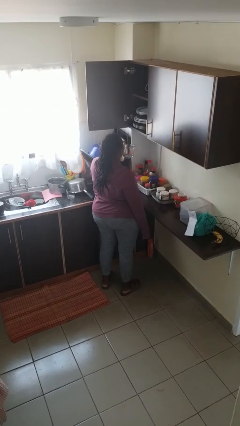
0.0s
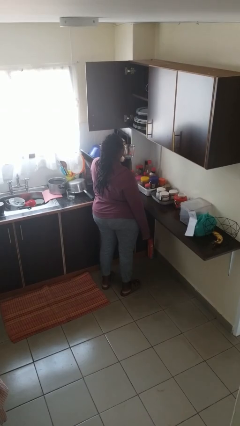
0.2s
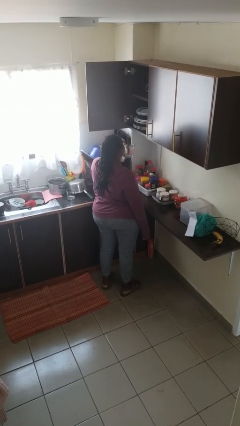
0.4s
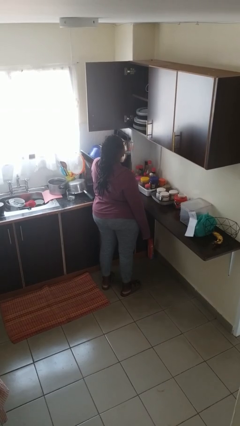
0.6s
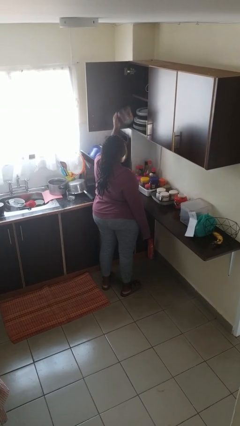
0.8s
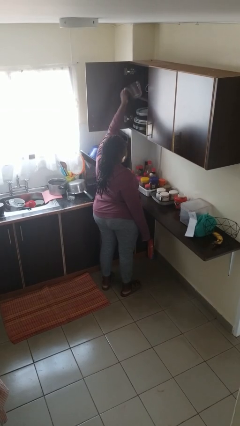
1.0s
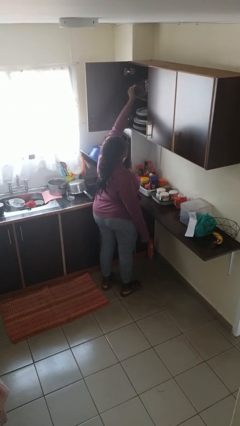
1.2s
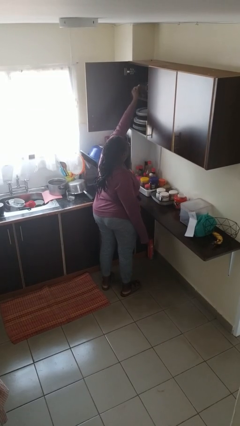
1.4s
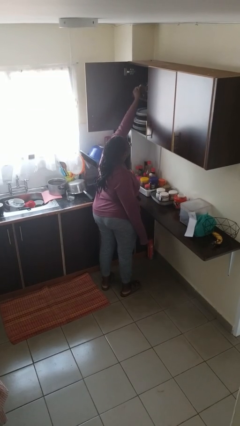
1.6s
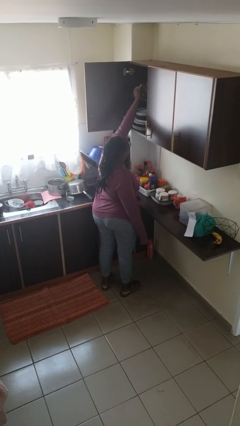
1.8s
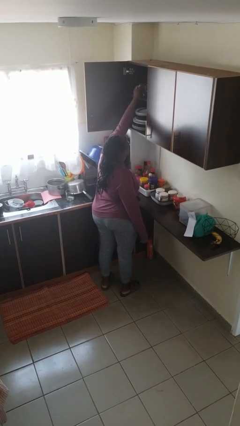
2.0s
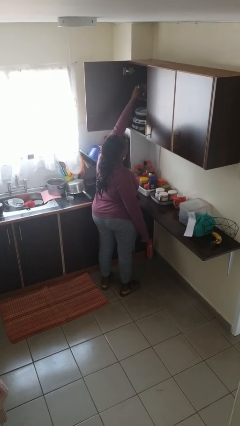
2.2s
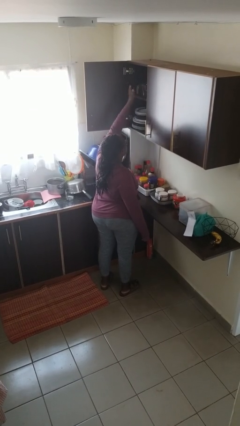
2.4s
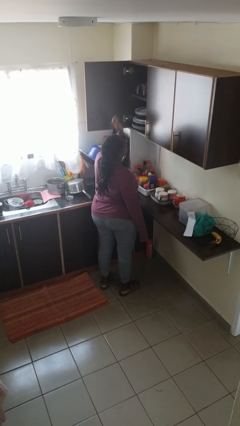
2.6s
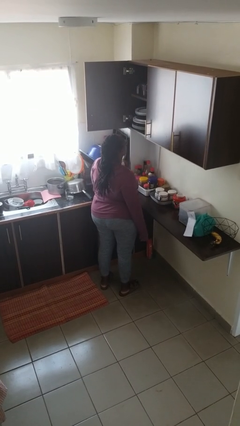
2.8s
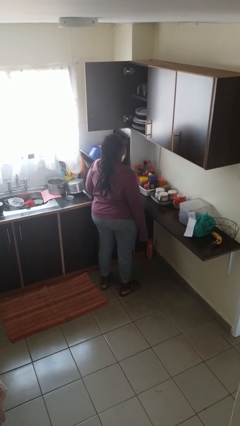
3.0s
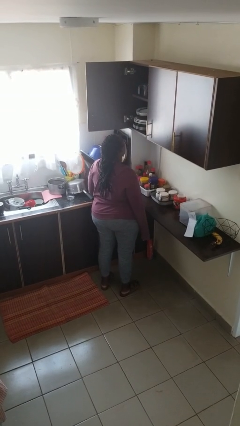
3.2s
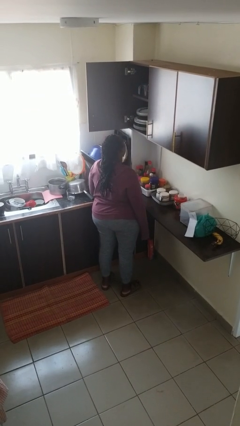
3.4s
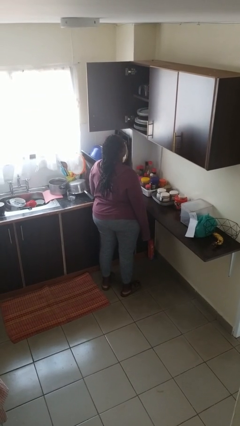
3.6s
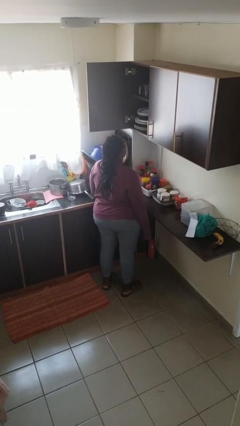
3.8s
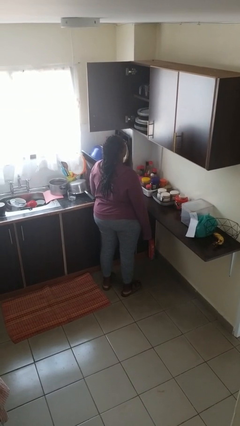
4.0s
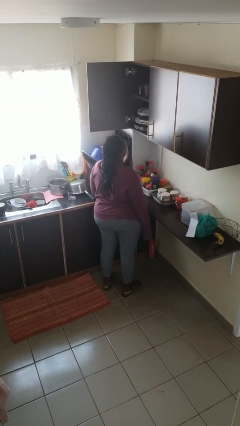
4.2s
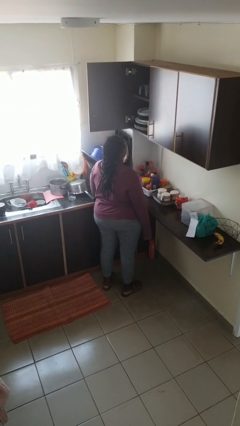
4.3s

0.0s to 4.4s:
person puts down object into cabinet

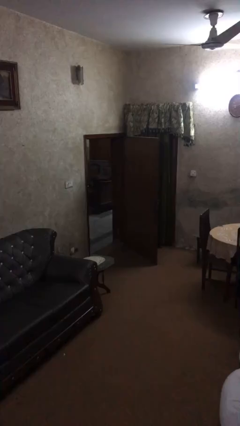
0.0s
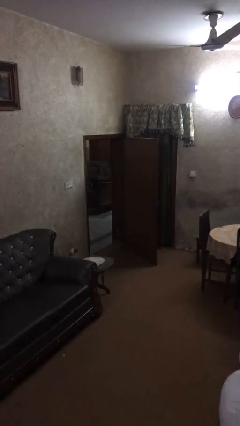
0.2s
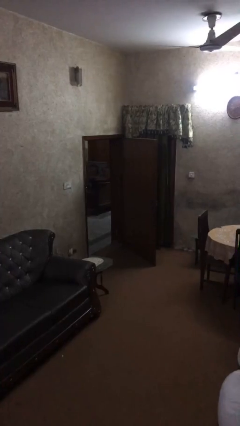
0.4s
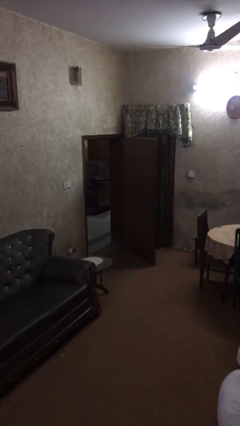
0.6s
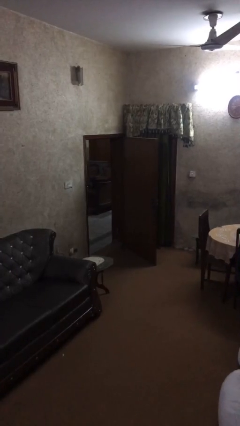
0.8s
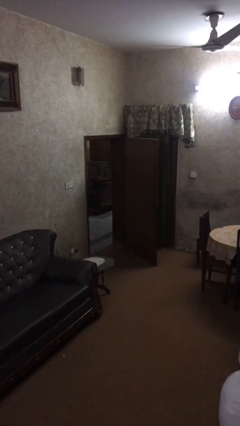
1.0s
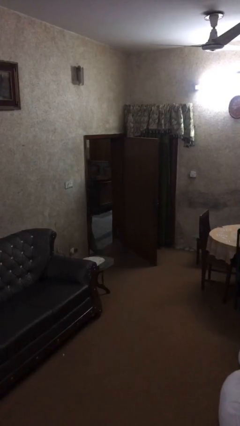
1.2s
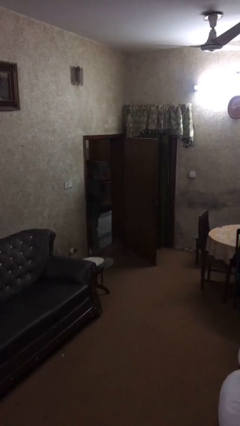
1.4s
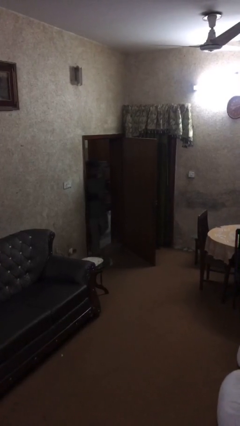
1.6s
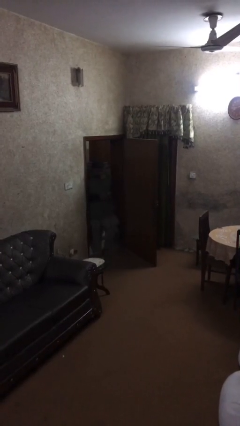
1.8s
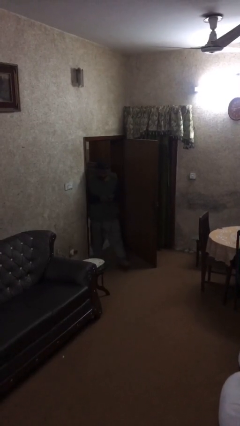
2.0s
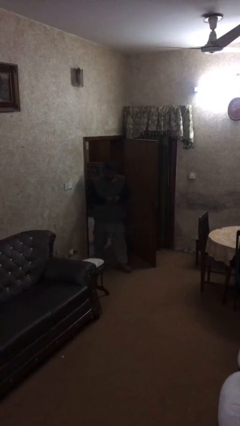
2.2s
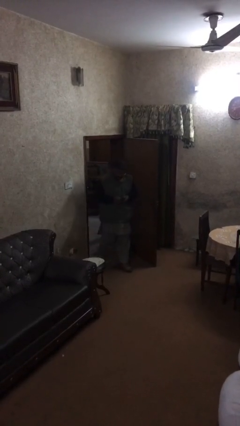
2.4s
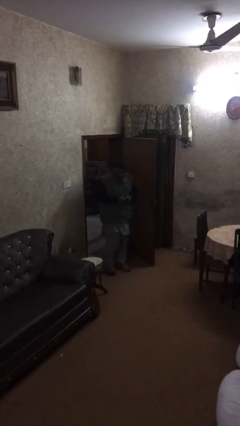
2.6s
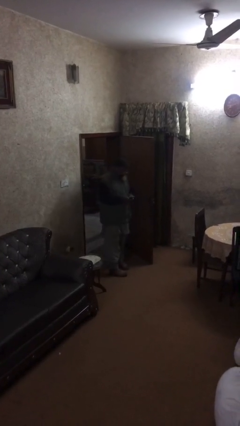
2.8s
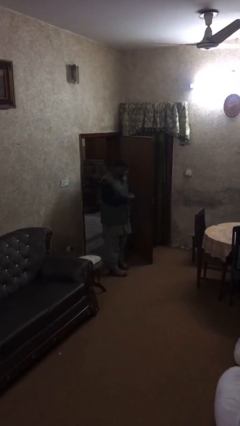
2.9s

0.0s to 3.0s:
person enters scene through structure

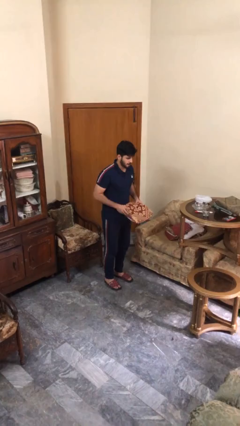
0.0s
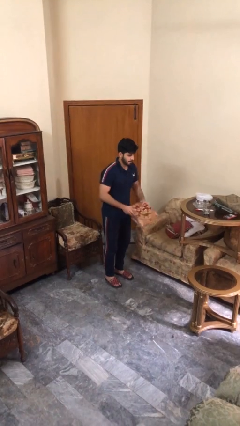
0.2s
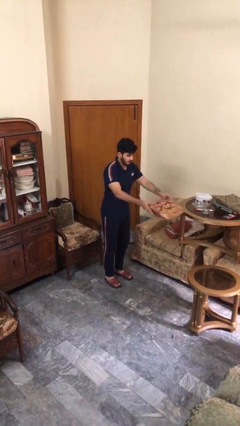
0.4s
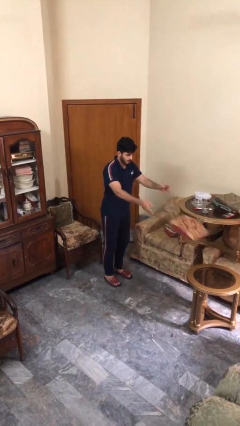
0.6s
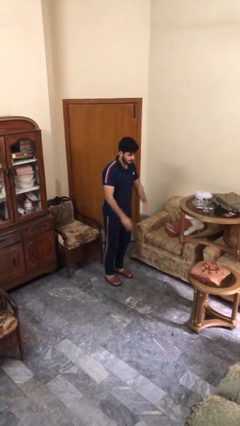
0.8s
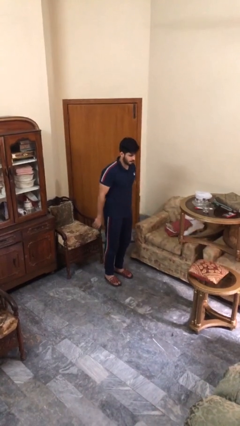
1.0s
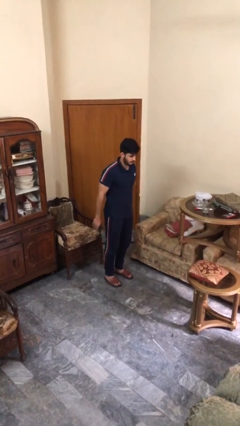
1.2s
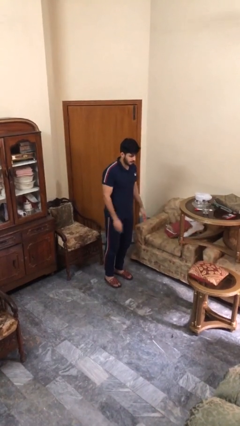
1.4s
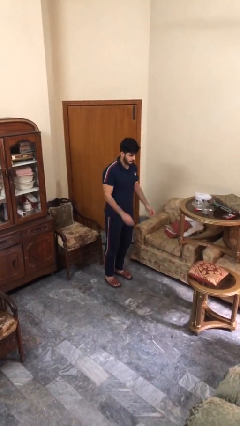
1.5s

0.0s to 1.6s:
person throws object on table

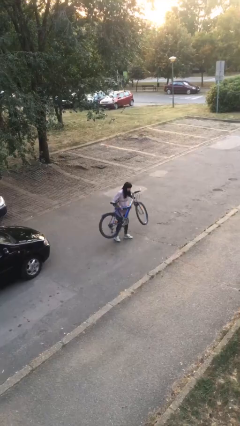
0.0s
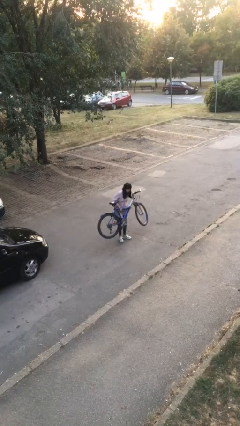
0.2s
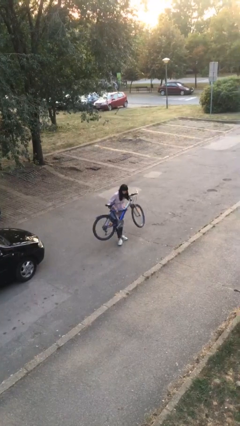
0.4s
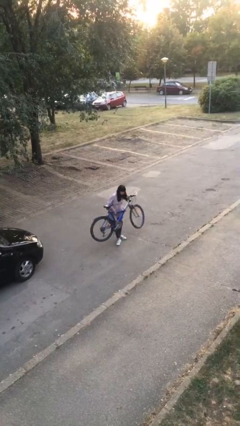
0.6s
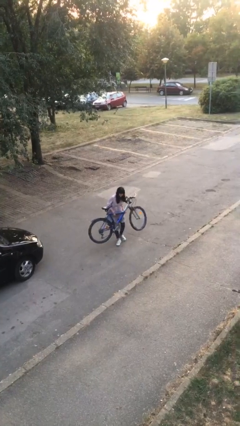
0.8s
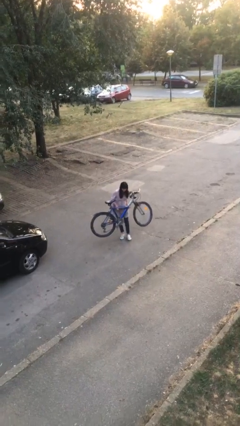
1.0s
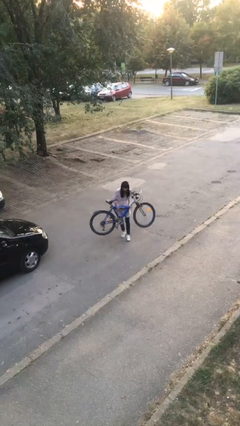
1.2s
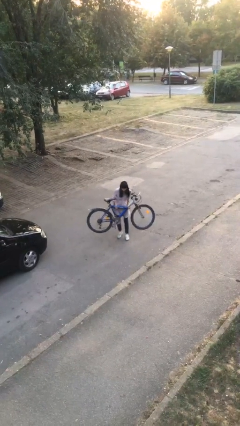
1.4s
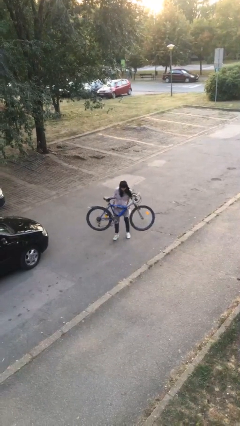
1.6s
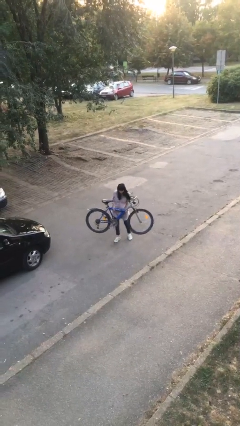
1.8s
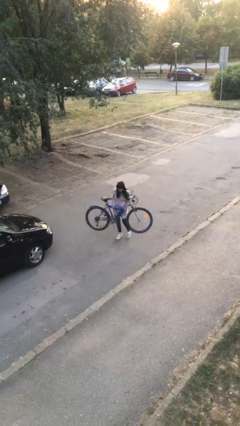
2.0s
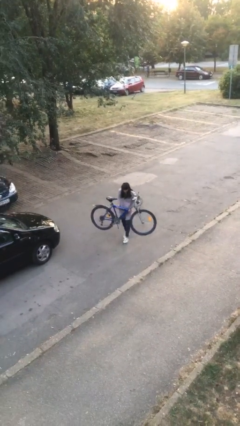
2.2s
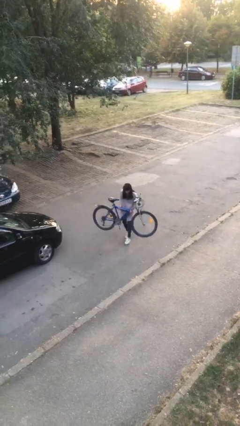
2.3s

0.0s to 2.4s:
person carries heavy object

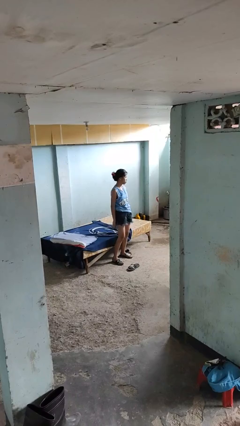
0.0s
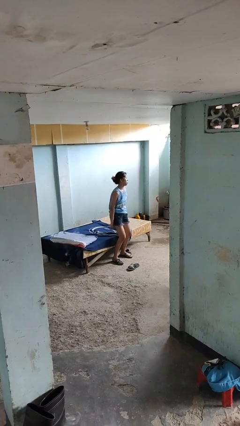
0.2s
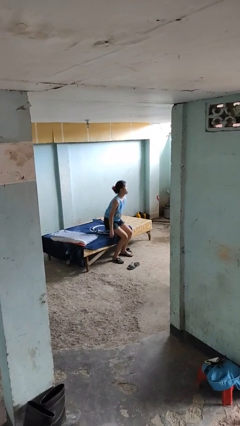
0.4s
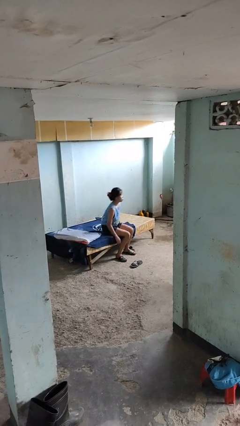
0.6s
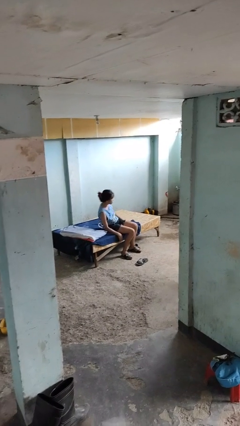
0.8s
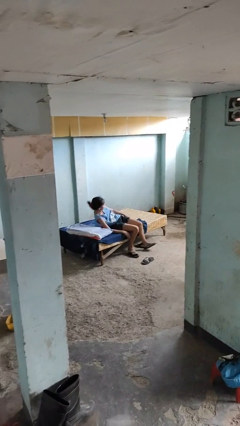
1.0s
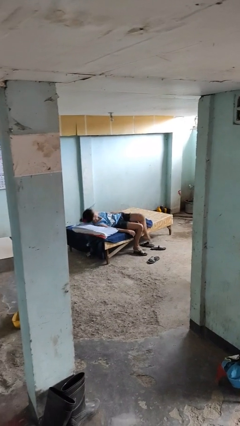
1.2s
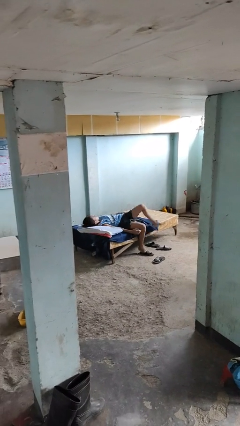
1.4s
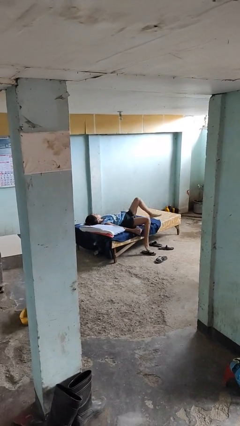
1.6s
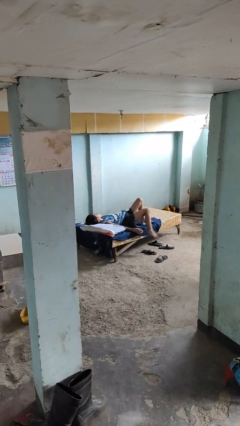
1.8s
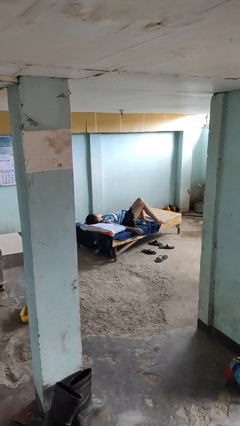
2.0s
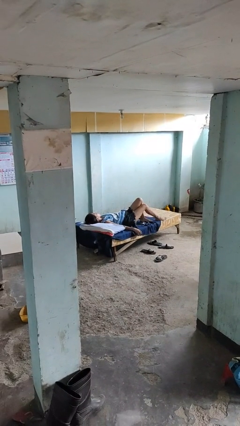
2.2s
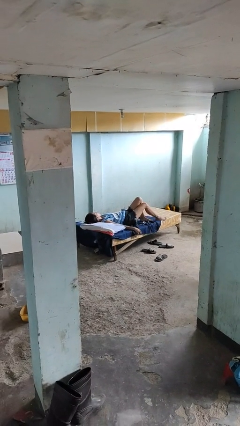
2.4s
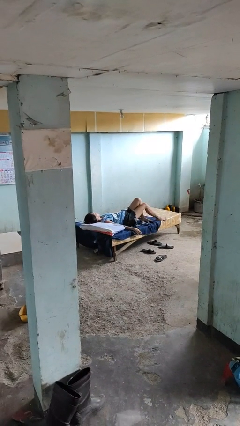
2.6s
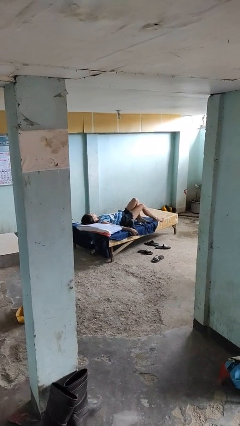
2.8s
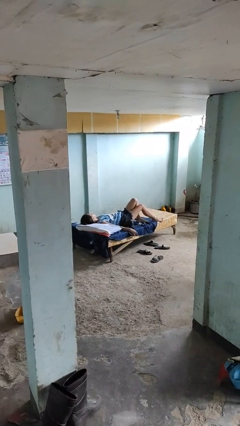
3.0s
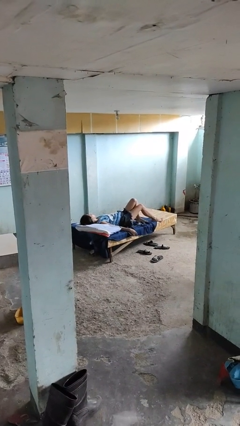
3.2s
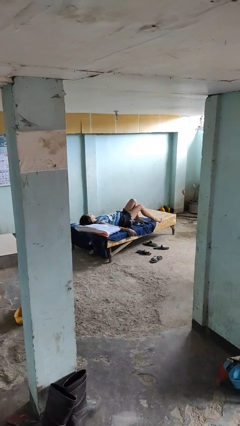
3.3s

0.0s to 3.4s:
person lies down on bed

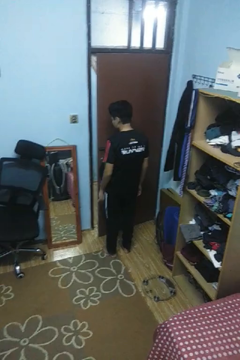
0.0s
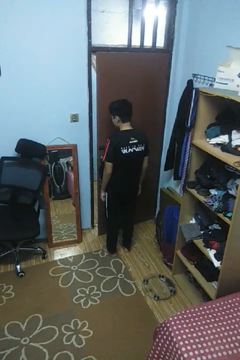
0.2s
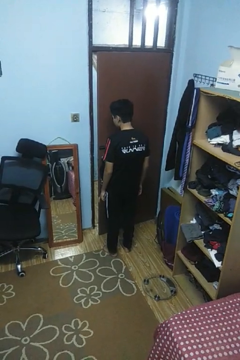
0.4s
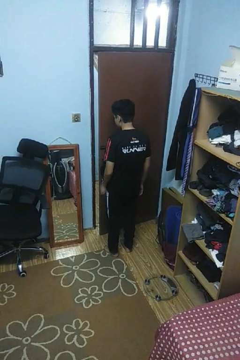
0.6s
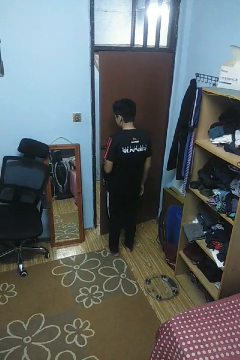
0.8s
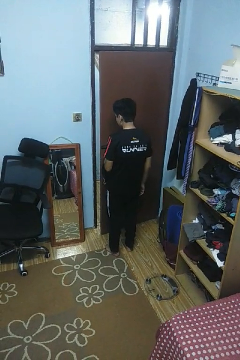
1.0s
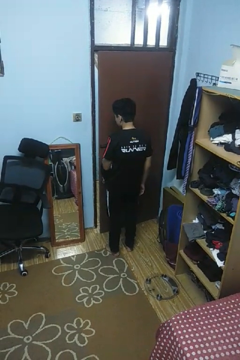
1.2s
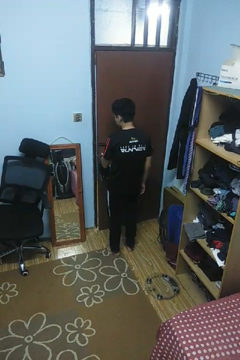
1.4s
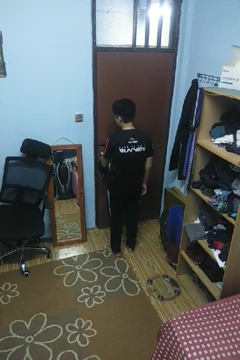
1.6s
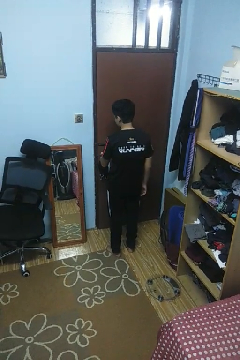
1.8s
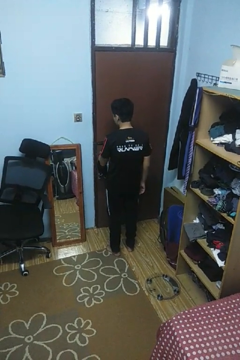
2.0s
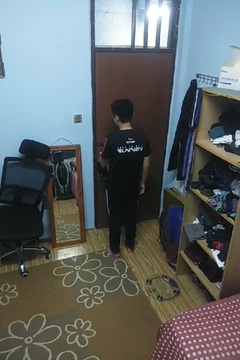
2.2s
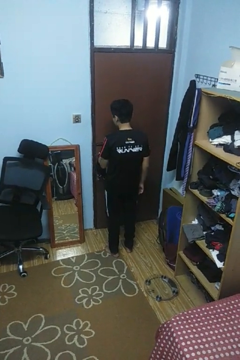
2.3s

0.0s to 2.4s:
person closes facility door

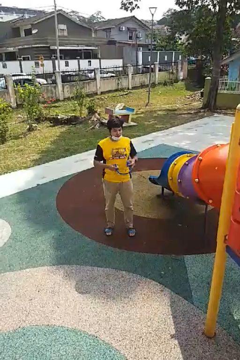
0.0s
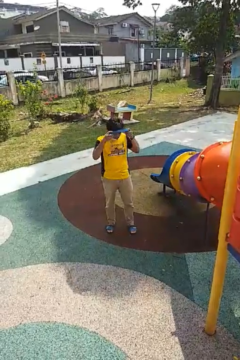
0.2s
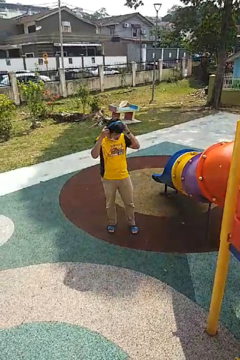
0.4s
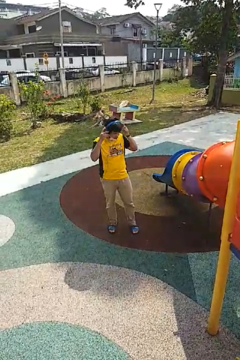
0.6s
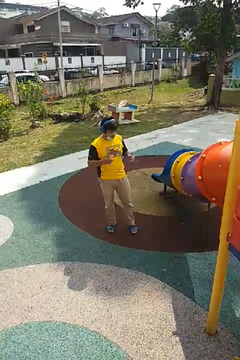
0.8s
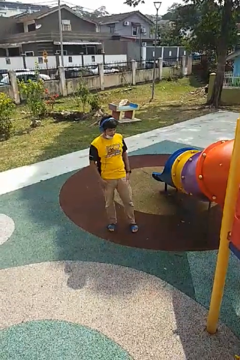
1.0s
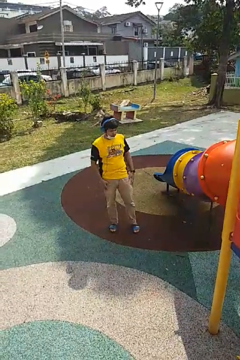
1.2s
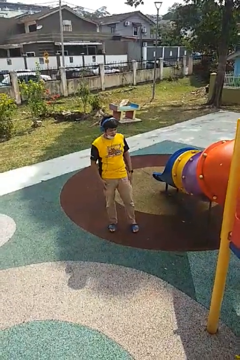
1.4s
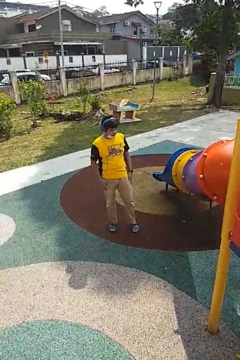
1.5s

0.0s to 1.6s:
person puts on headphones
